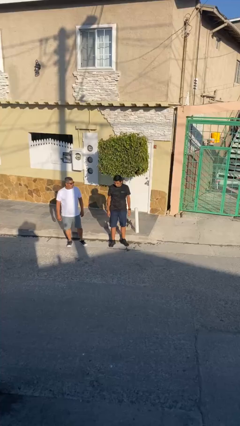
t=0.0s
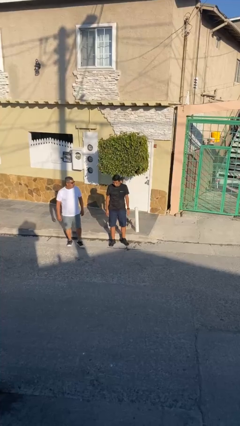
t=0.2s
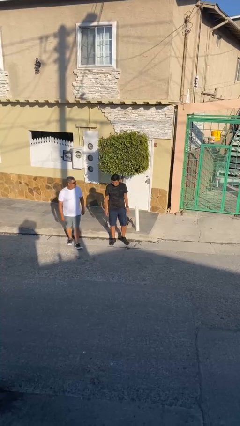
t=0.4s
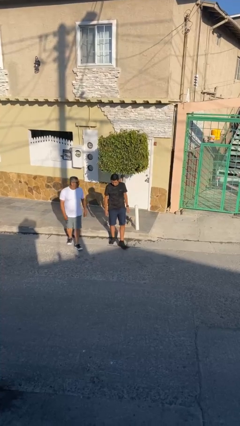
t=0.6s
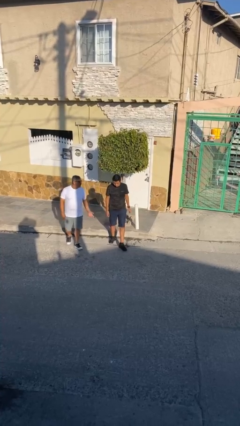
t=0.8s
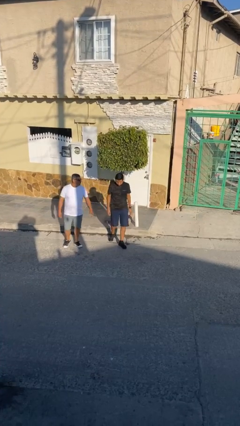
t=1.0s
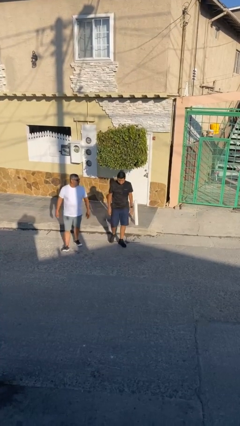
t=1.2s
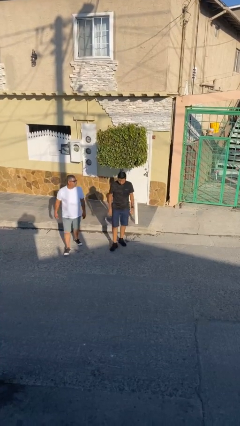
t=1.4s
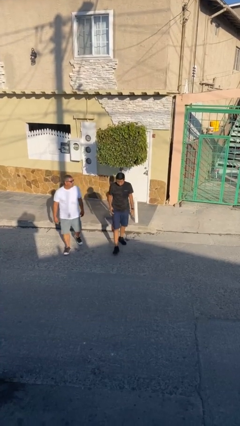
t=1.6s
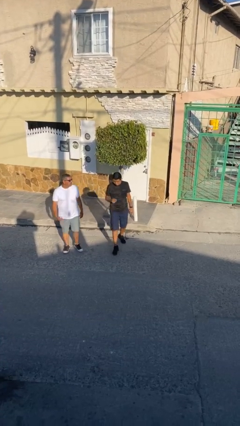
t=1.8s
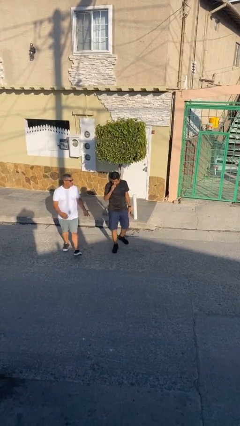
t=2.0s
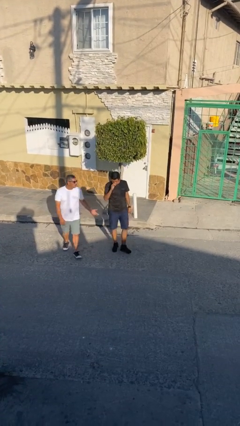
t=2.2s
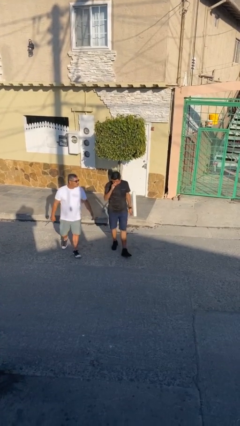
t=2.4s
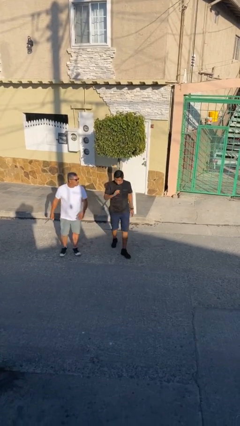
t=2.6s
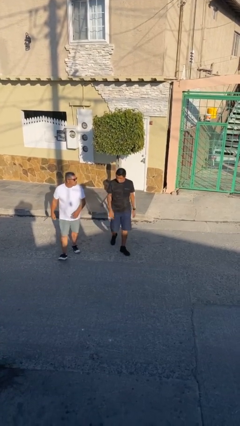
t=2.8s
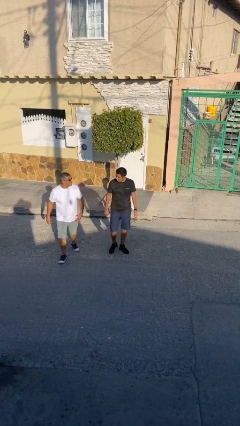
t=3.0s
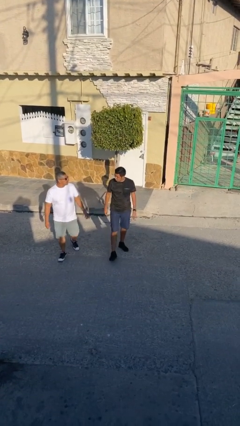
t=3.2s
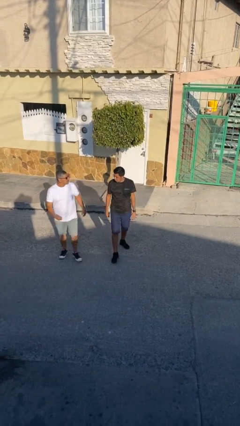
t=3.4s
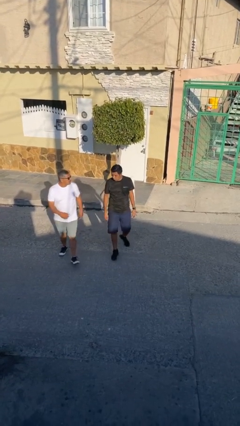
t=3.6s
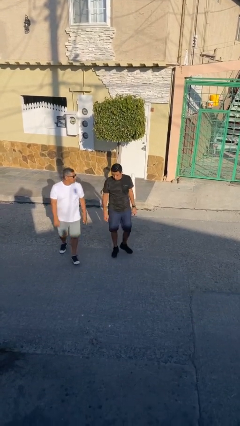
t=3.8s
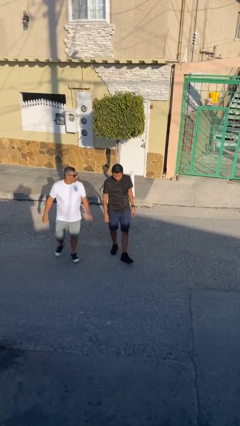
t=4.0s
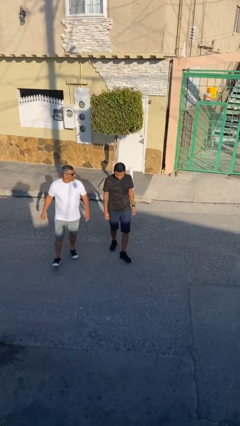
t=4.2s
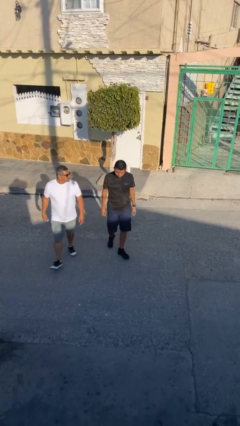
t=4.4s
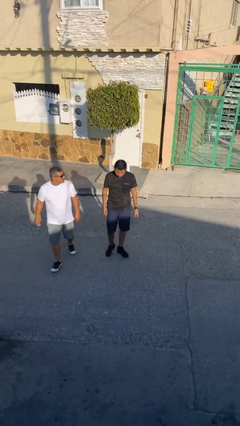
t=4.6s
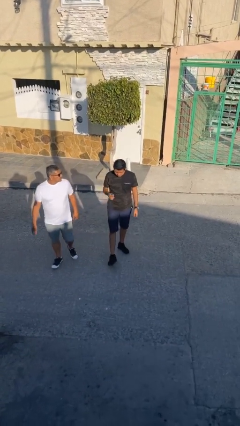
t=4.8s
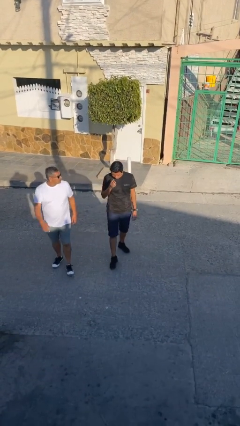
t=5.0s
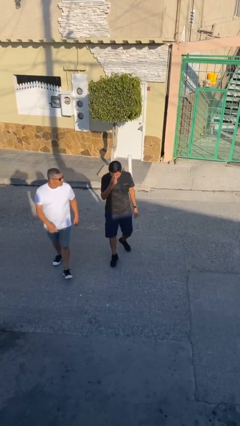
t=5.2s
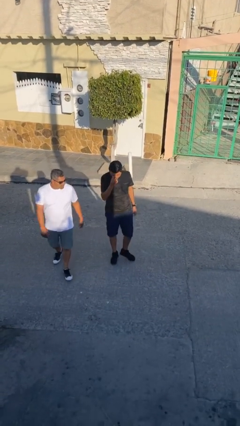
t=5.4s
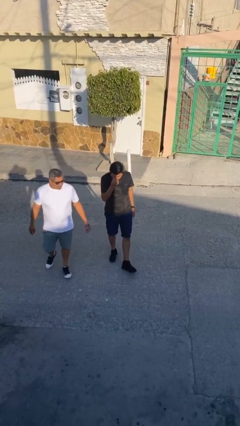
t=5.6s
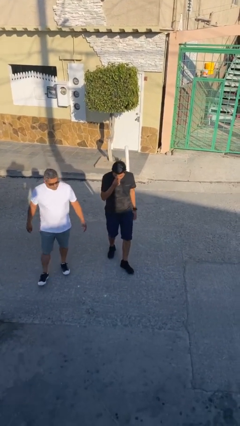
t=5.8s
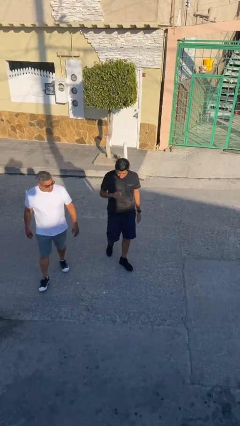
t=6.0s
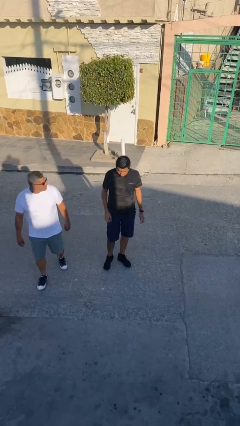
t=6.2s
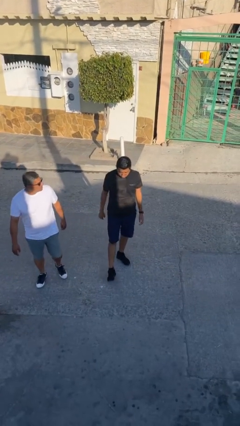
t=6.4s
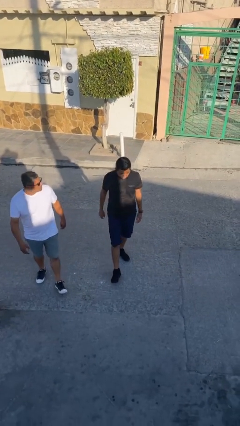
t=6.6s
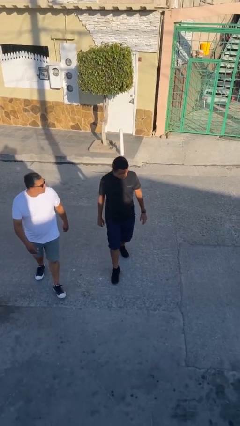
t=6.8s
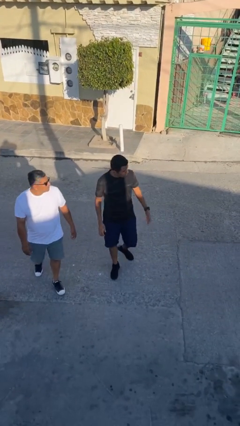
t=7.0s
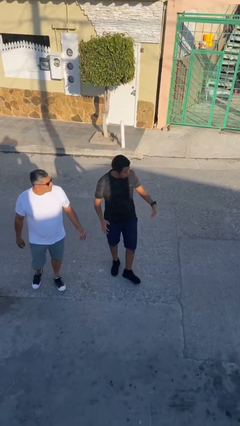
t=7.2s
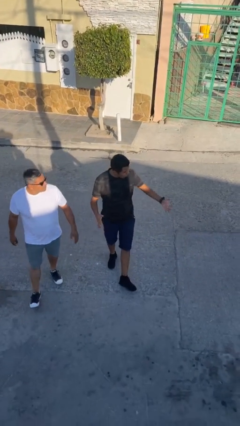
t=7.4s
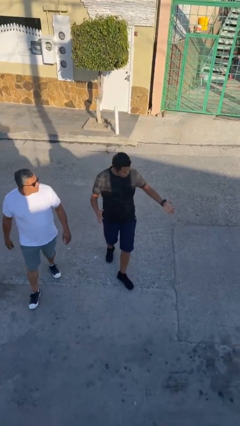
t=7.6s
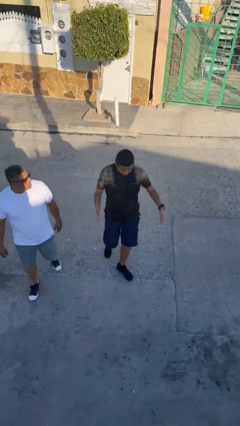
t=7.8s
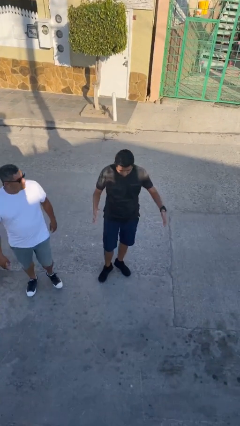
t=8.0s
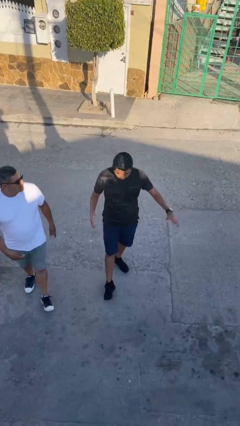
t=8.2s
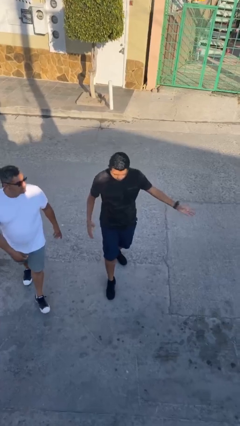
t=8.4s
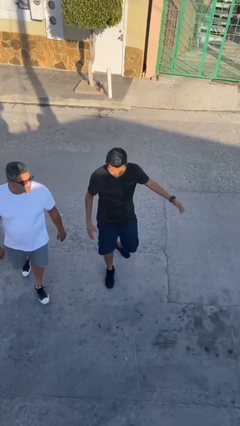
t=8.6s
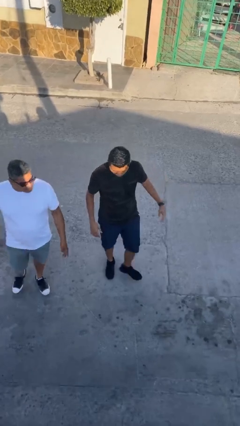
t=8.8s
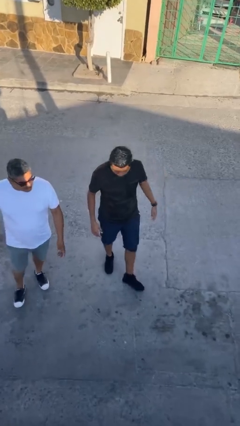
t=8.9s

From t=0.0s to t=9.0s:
person talks to person

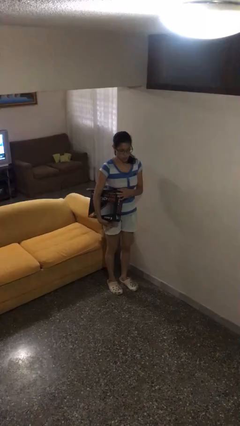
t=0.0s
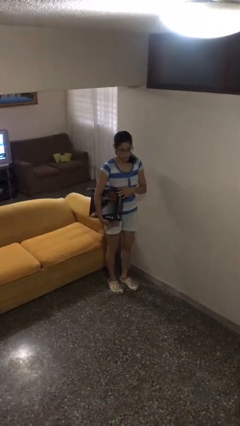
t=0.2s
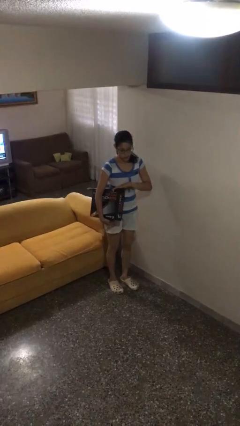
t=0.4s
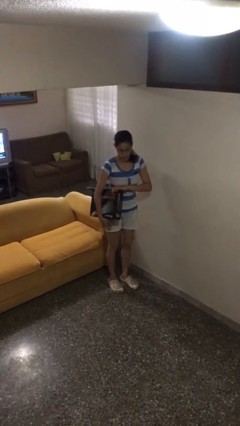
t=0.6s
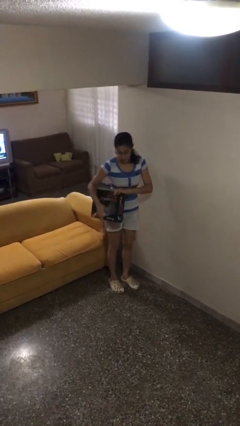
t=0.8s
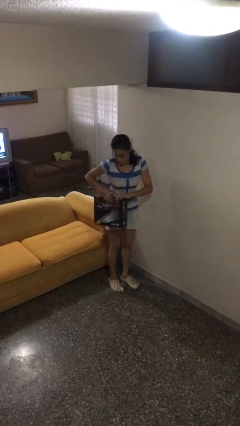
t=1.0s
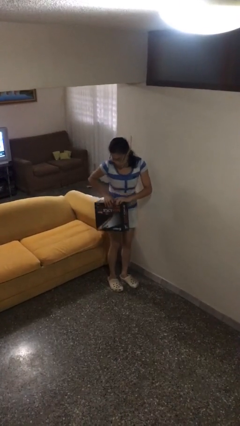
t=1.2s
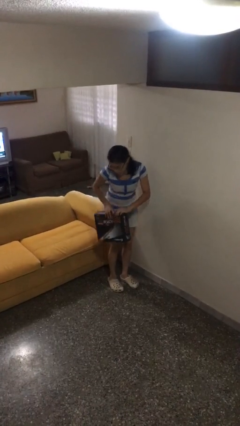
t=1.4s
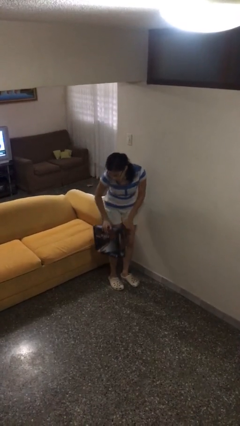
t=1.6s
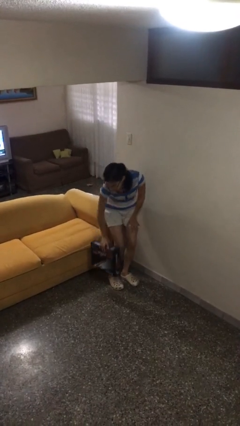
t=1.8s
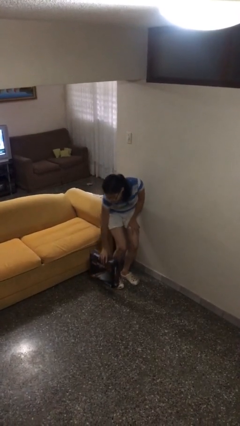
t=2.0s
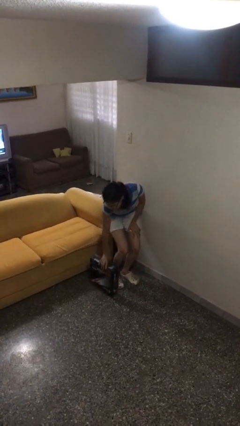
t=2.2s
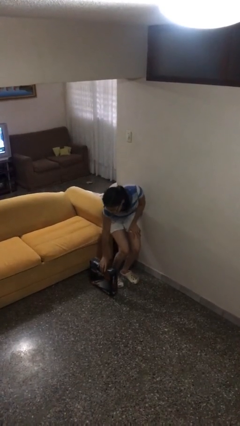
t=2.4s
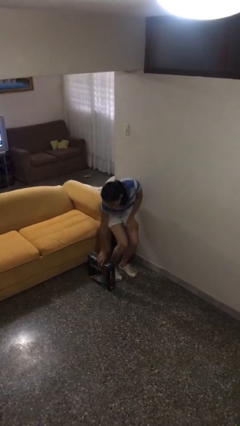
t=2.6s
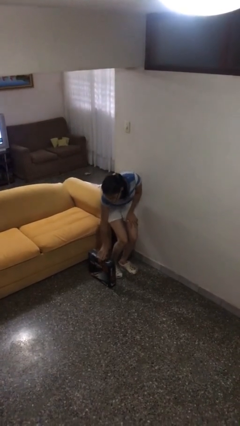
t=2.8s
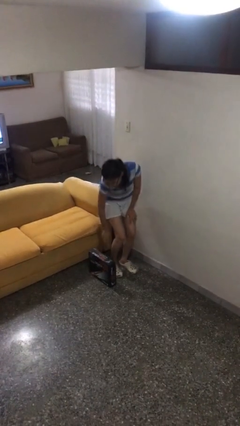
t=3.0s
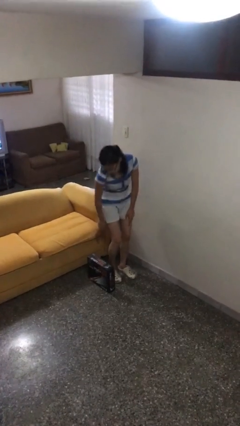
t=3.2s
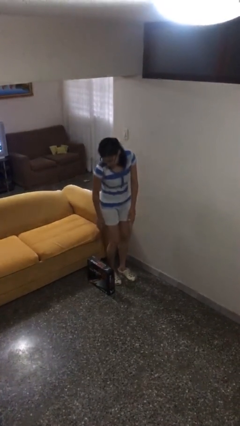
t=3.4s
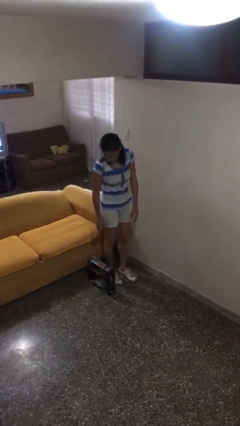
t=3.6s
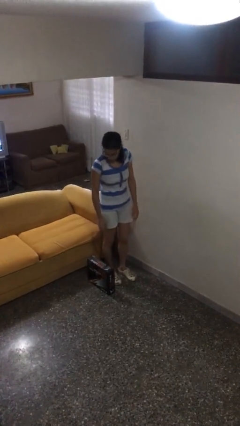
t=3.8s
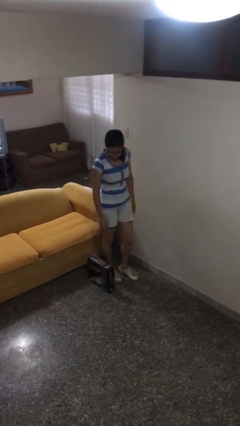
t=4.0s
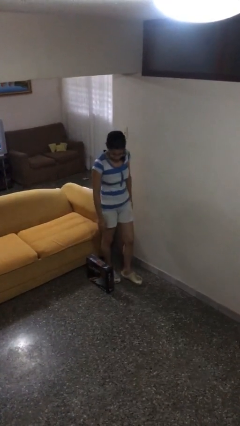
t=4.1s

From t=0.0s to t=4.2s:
person puts down object on floor

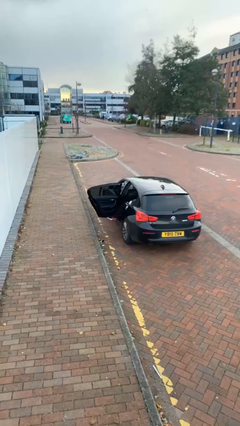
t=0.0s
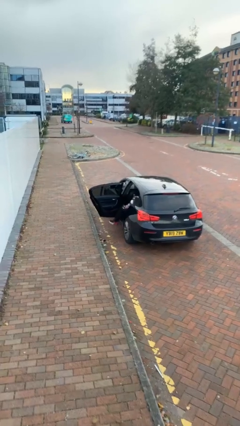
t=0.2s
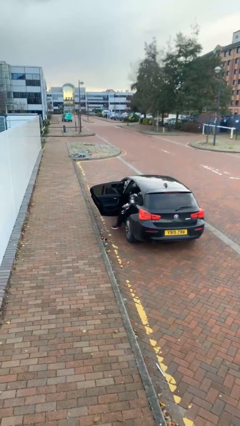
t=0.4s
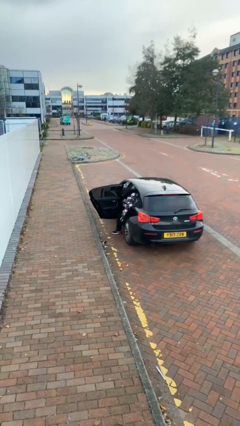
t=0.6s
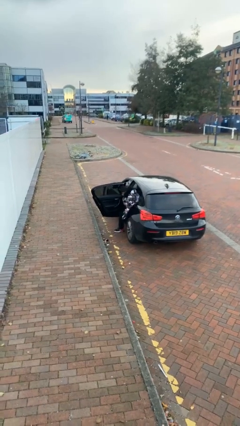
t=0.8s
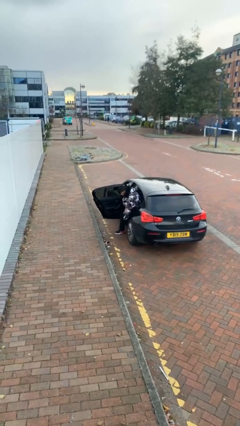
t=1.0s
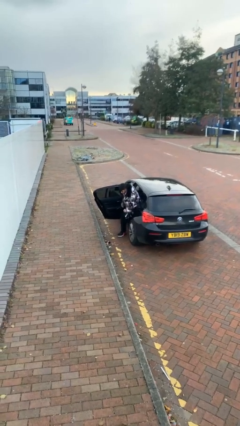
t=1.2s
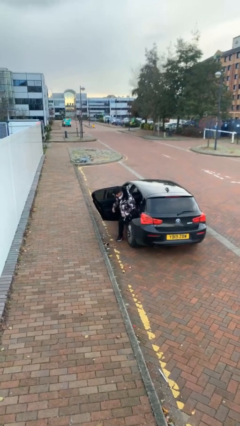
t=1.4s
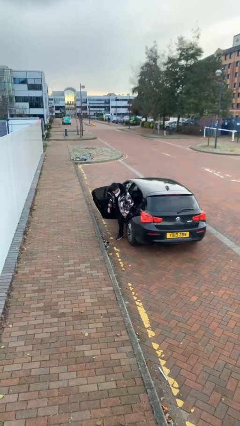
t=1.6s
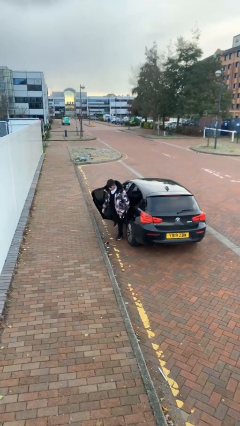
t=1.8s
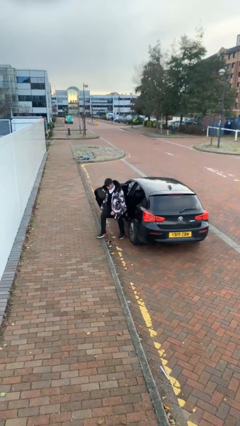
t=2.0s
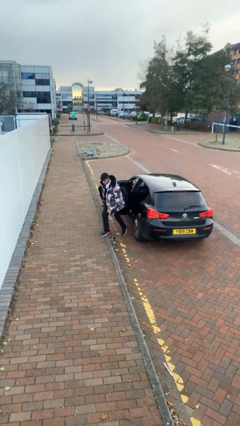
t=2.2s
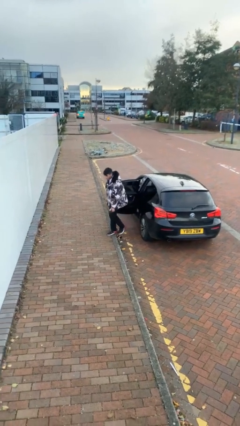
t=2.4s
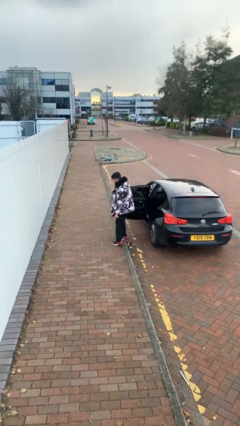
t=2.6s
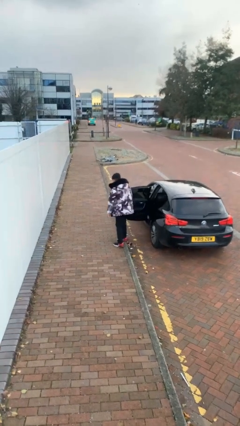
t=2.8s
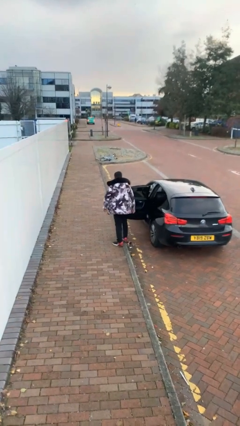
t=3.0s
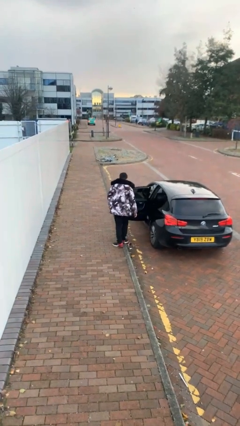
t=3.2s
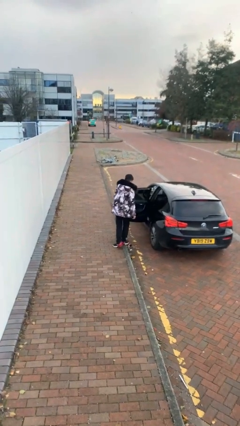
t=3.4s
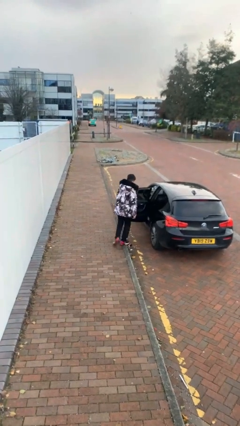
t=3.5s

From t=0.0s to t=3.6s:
person exits car

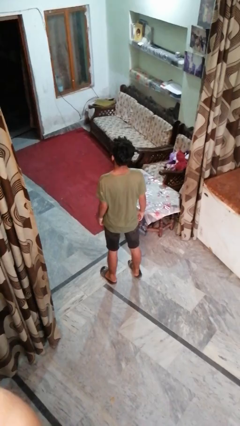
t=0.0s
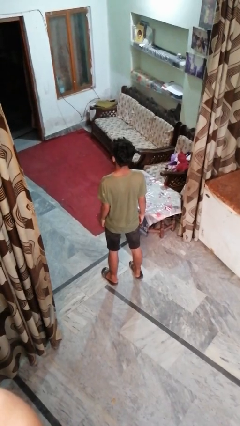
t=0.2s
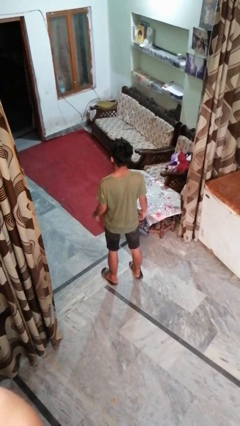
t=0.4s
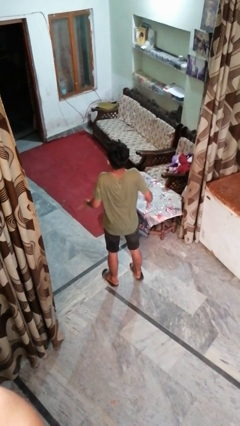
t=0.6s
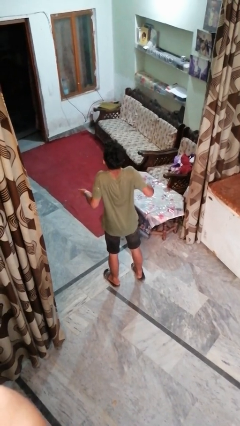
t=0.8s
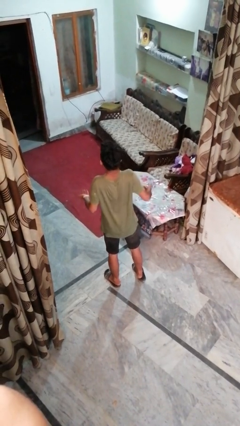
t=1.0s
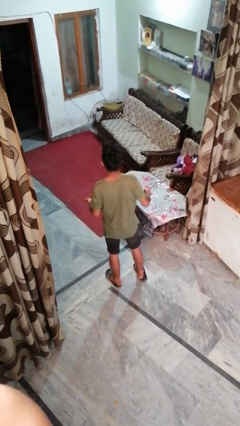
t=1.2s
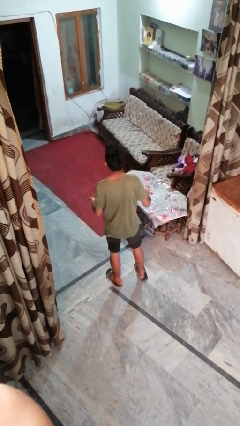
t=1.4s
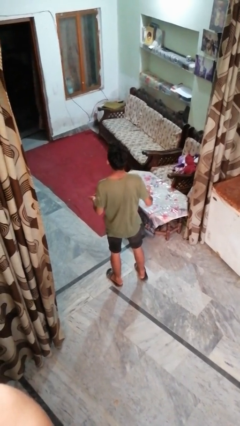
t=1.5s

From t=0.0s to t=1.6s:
person shrugs
